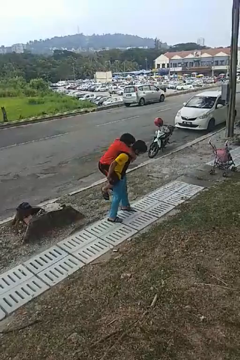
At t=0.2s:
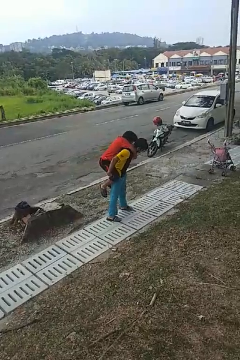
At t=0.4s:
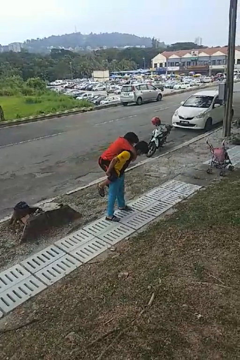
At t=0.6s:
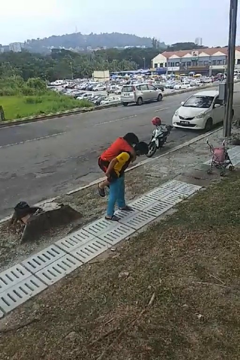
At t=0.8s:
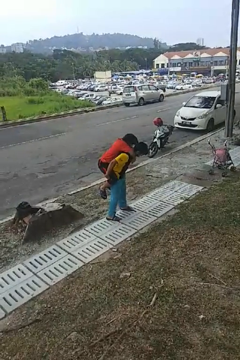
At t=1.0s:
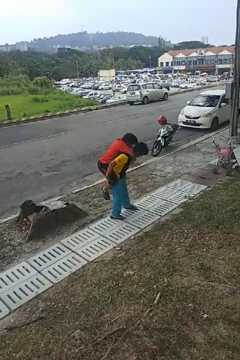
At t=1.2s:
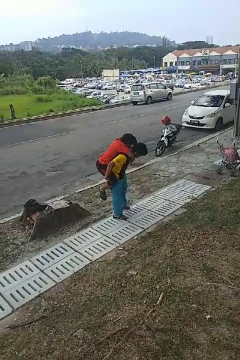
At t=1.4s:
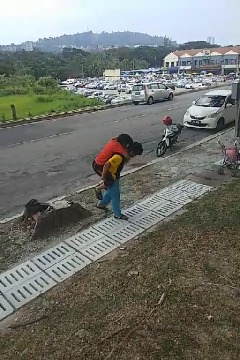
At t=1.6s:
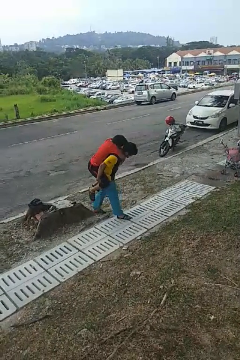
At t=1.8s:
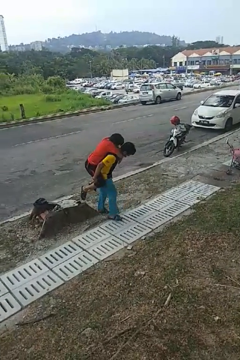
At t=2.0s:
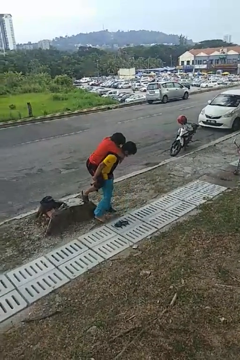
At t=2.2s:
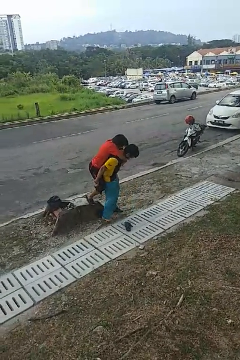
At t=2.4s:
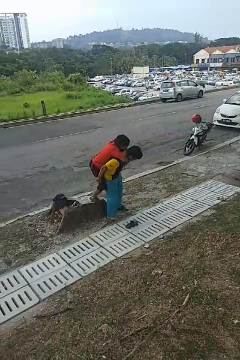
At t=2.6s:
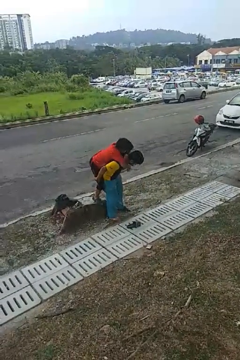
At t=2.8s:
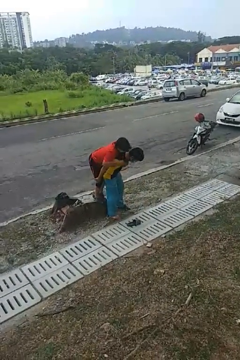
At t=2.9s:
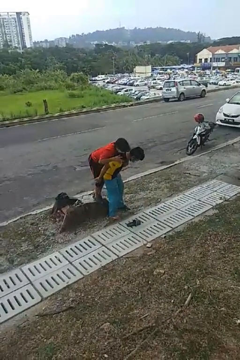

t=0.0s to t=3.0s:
person puts down person

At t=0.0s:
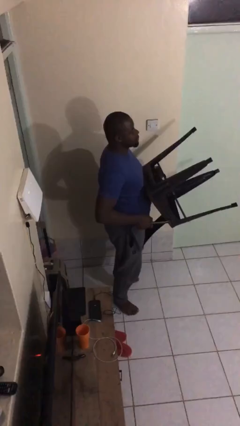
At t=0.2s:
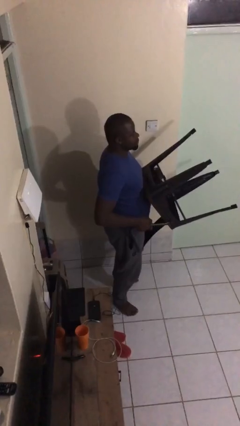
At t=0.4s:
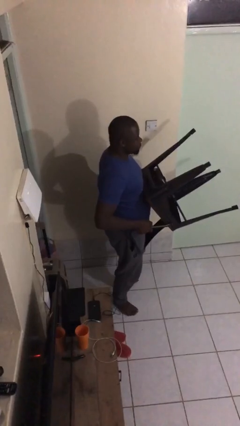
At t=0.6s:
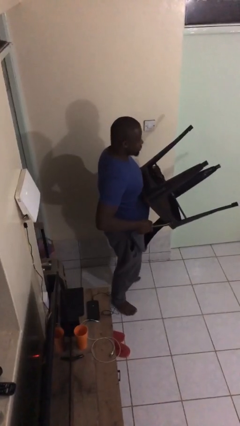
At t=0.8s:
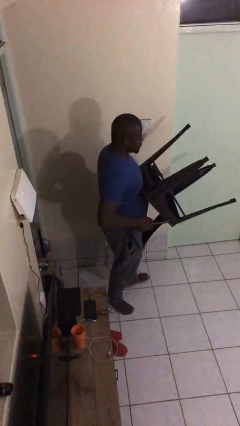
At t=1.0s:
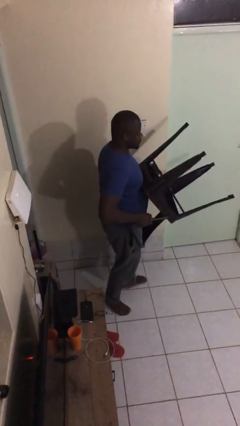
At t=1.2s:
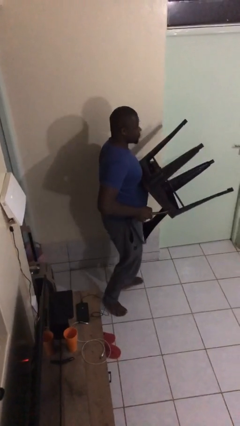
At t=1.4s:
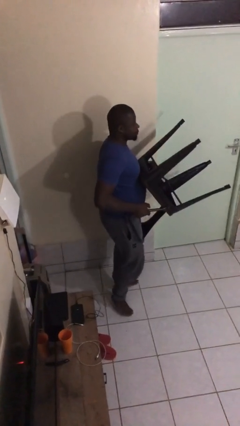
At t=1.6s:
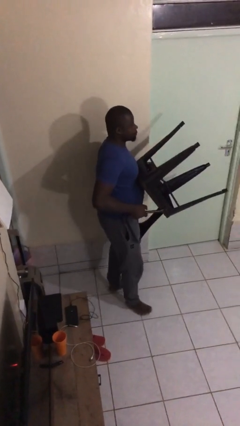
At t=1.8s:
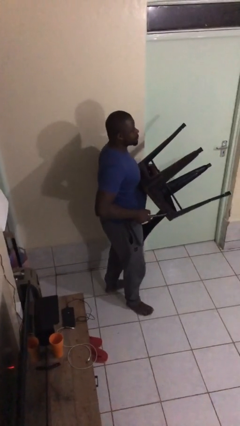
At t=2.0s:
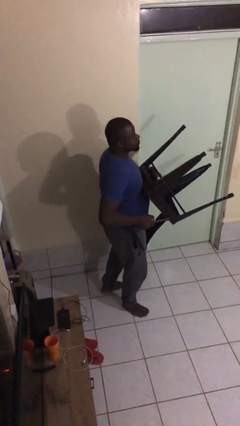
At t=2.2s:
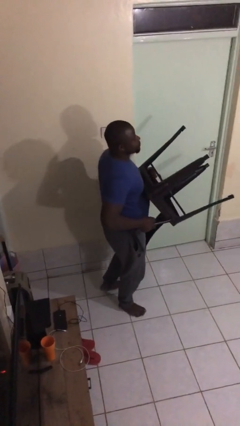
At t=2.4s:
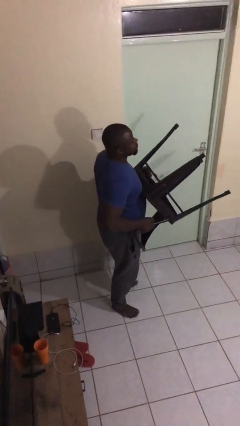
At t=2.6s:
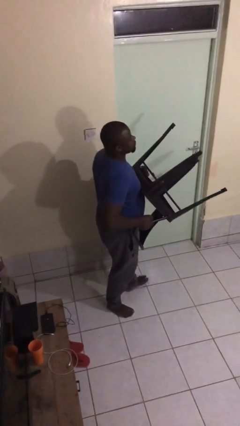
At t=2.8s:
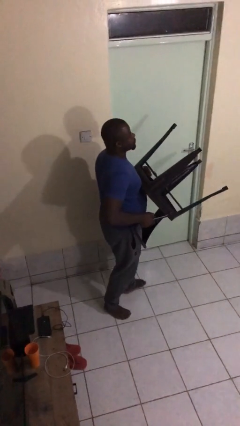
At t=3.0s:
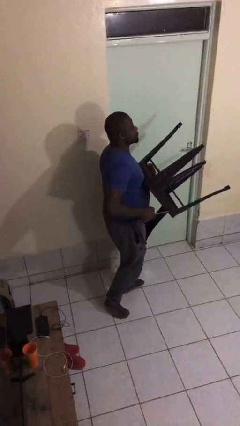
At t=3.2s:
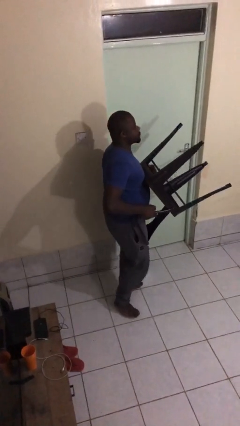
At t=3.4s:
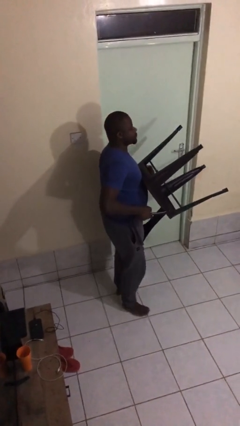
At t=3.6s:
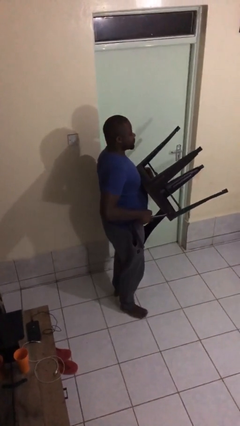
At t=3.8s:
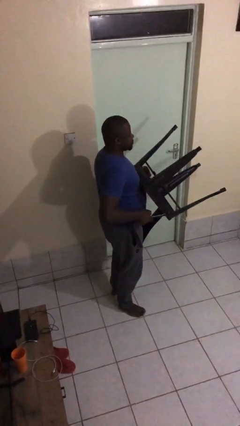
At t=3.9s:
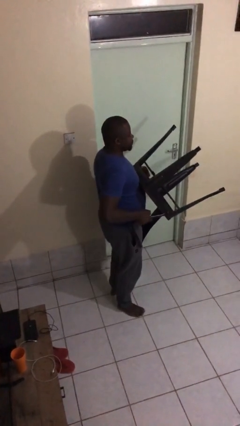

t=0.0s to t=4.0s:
person carries furniture

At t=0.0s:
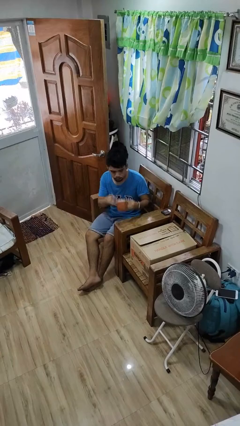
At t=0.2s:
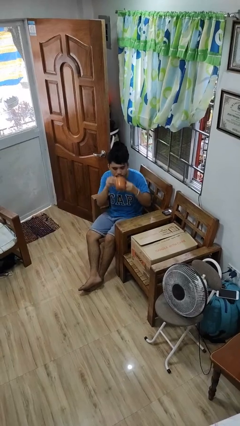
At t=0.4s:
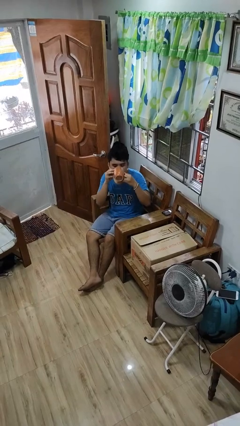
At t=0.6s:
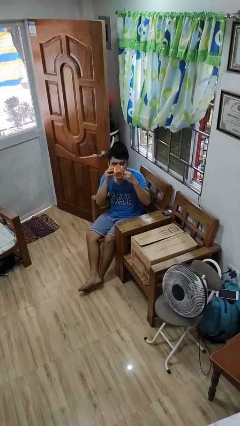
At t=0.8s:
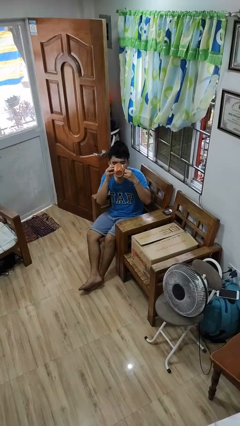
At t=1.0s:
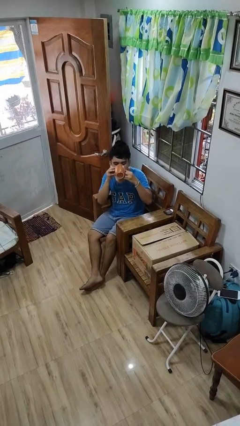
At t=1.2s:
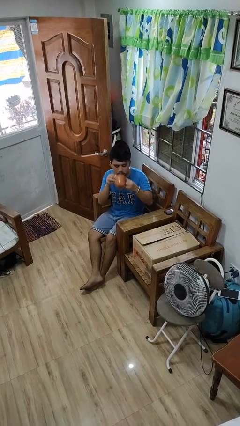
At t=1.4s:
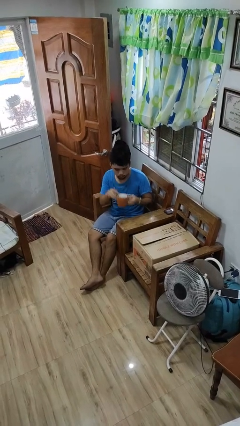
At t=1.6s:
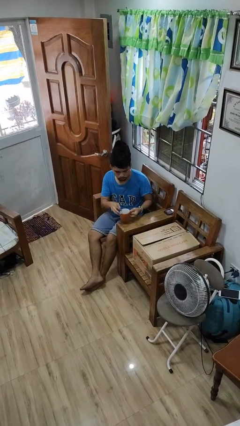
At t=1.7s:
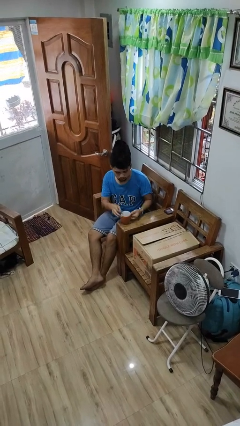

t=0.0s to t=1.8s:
person drinks from mug

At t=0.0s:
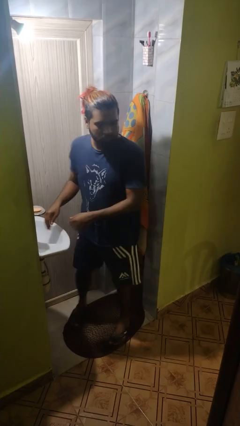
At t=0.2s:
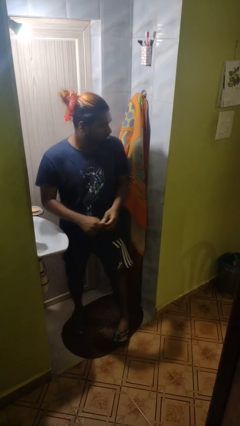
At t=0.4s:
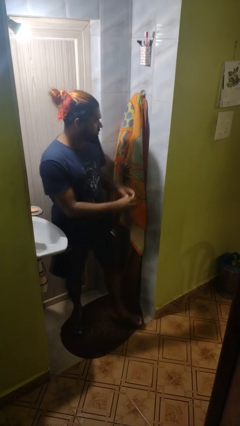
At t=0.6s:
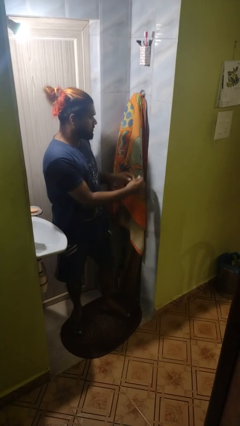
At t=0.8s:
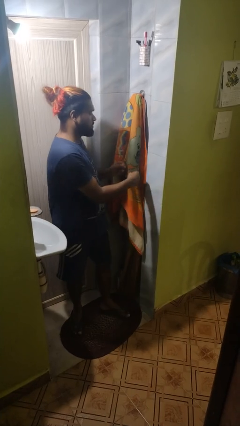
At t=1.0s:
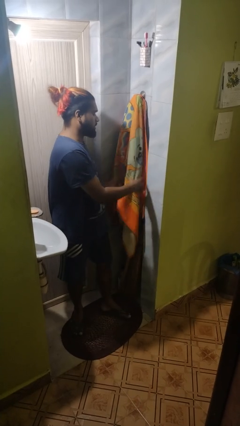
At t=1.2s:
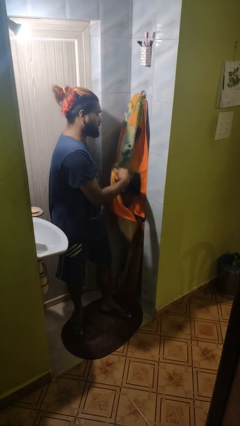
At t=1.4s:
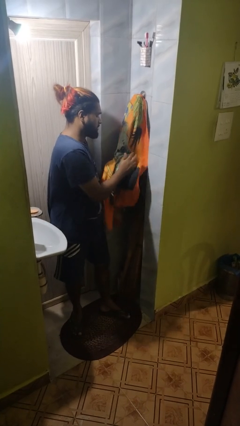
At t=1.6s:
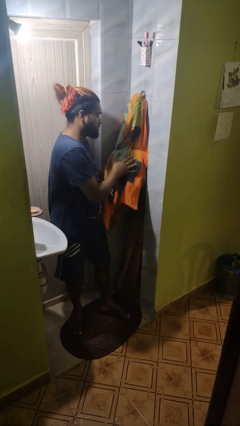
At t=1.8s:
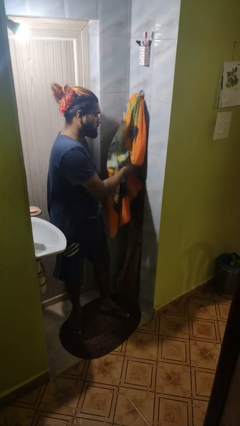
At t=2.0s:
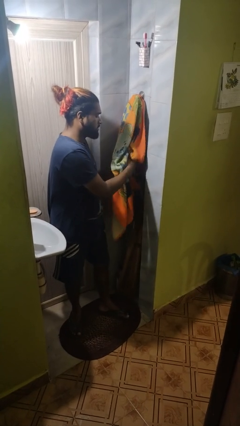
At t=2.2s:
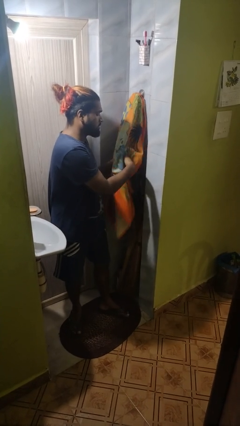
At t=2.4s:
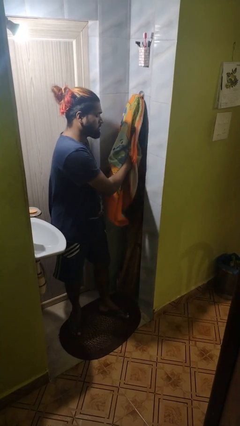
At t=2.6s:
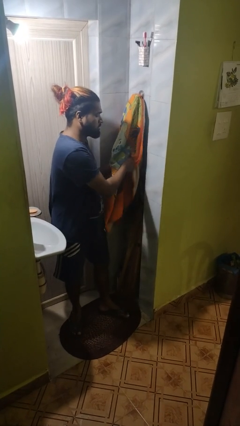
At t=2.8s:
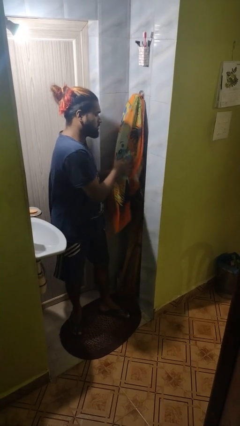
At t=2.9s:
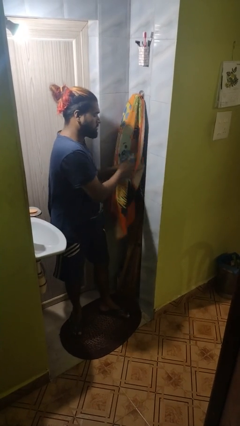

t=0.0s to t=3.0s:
person dries hands with towel

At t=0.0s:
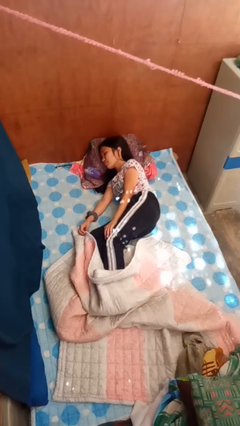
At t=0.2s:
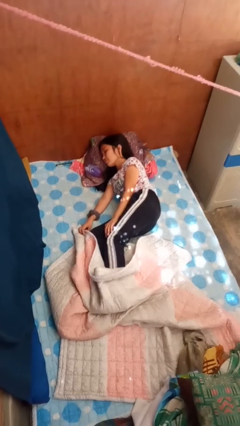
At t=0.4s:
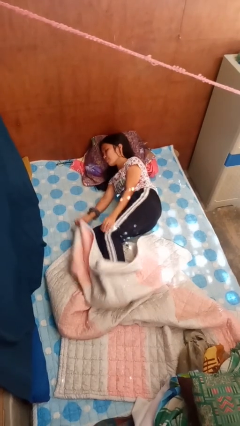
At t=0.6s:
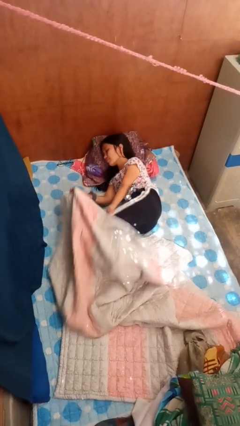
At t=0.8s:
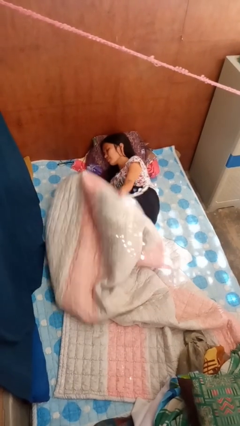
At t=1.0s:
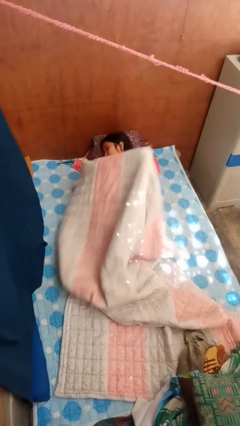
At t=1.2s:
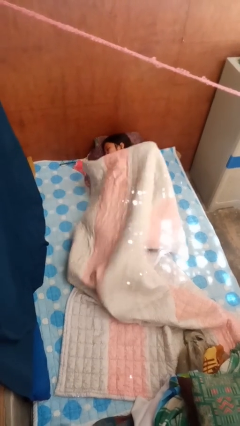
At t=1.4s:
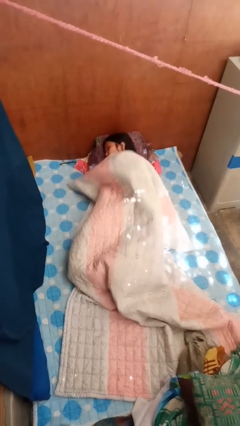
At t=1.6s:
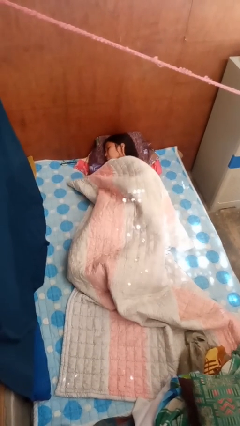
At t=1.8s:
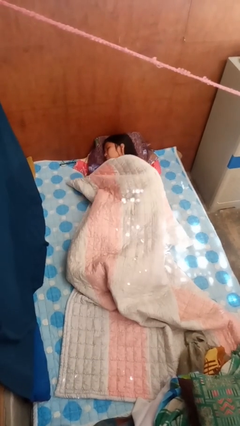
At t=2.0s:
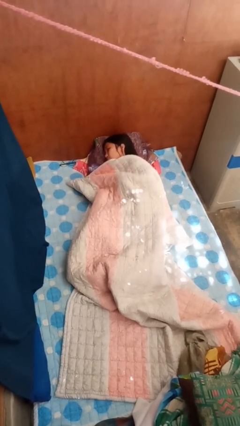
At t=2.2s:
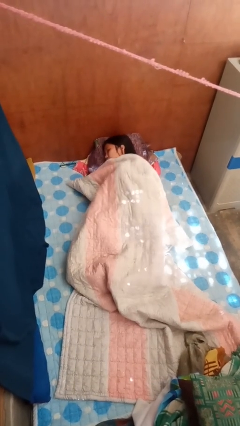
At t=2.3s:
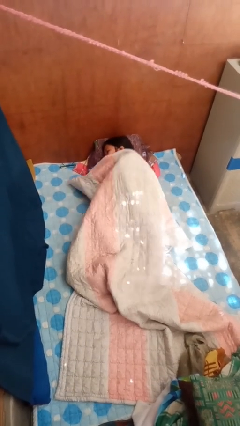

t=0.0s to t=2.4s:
person covers with bedsheets

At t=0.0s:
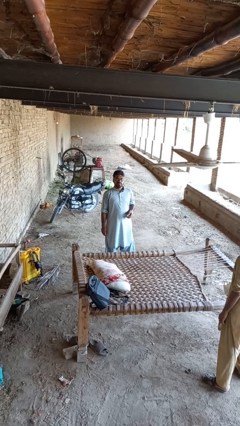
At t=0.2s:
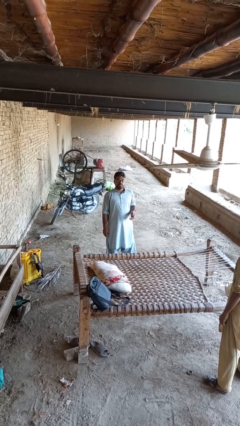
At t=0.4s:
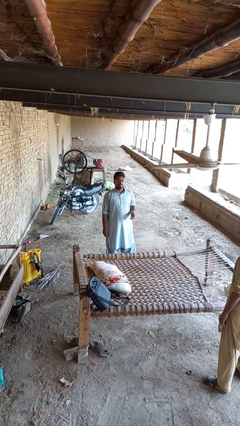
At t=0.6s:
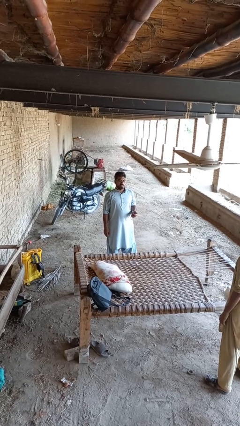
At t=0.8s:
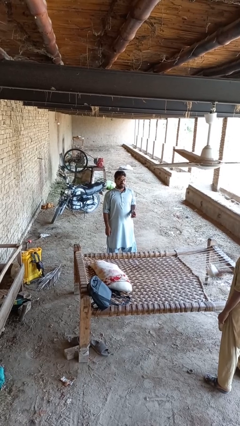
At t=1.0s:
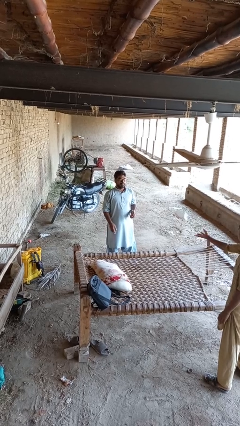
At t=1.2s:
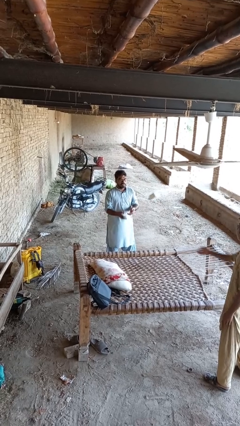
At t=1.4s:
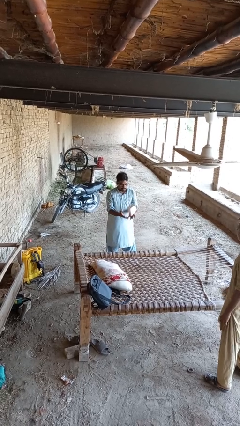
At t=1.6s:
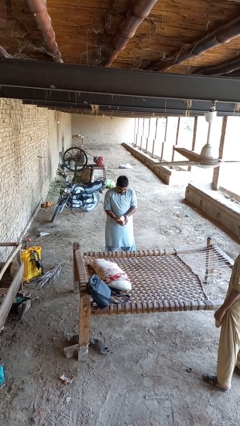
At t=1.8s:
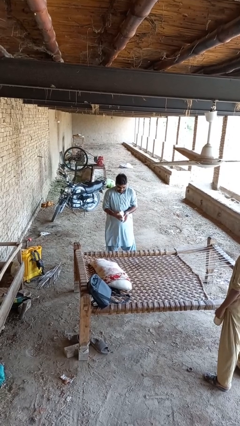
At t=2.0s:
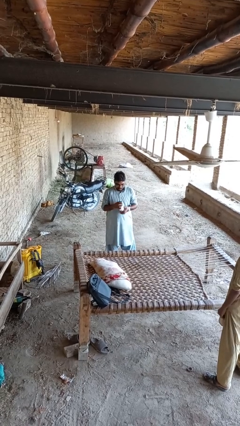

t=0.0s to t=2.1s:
person catches object from person

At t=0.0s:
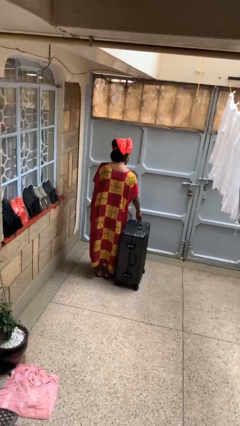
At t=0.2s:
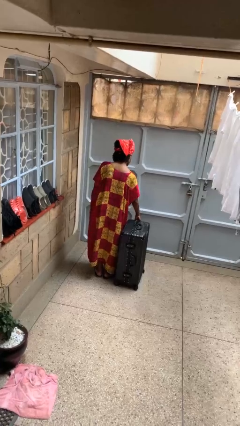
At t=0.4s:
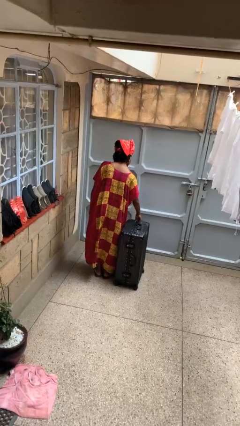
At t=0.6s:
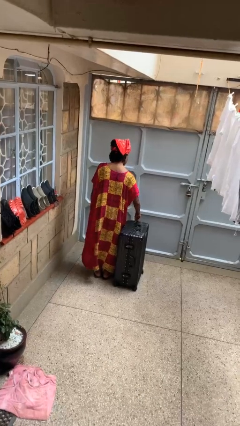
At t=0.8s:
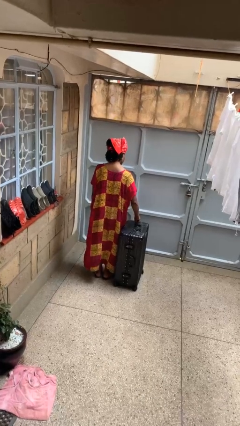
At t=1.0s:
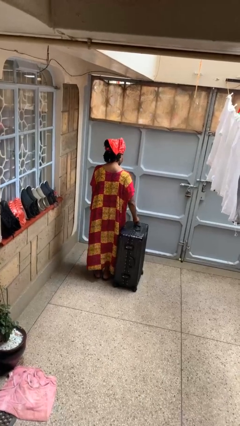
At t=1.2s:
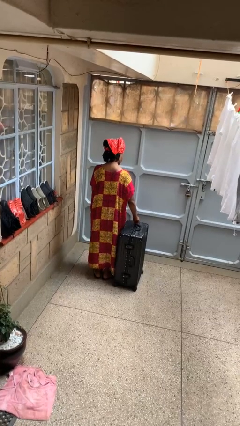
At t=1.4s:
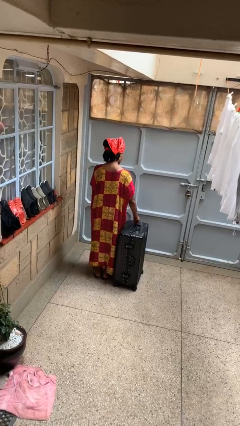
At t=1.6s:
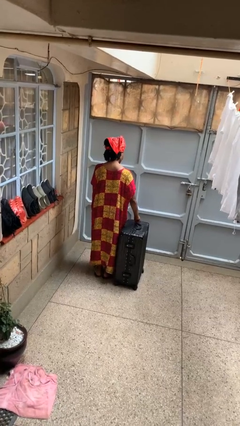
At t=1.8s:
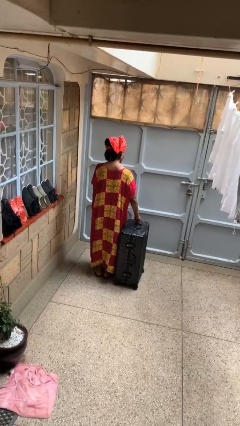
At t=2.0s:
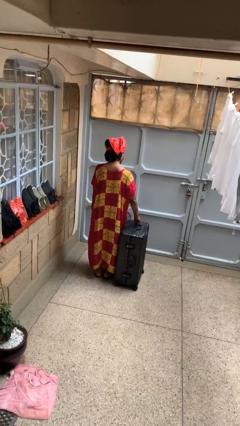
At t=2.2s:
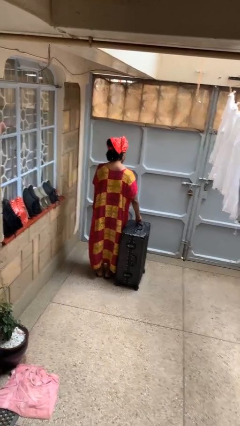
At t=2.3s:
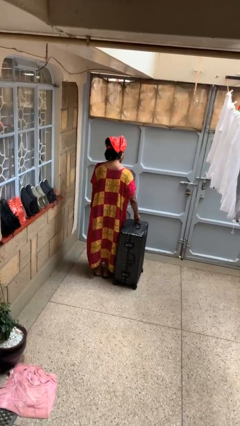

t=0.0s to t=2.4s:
person opens suitcase
